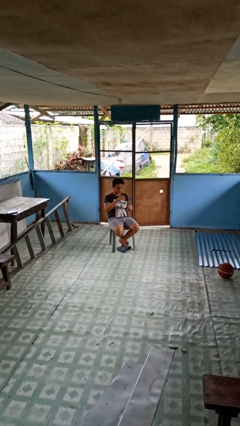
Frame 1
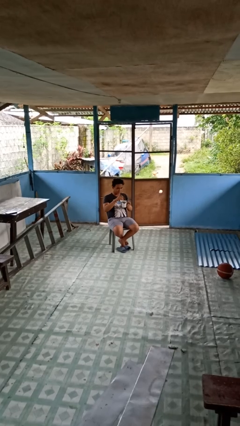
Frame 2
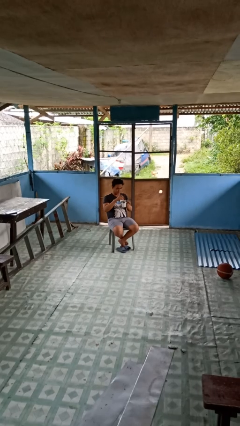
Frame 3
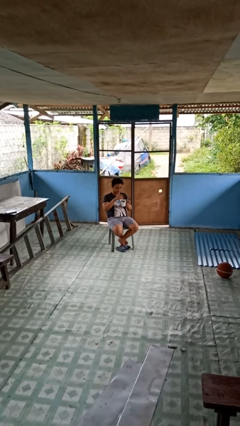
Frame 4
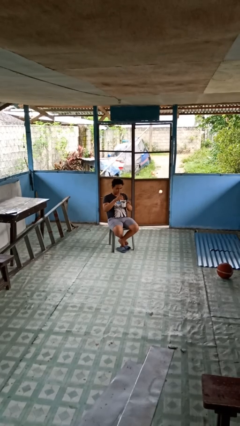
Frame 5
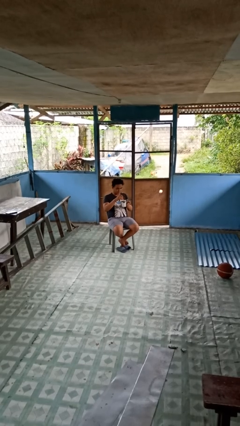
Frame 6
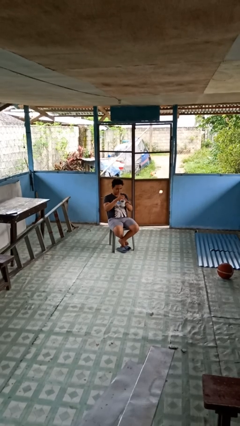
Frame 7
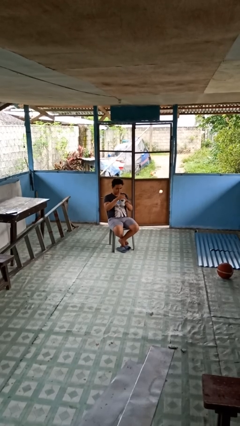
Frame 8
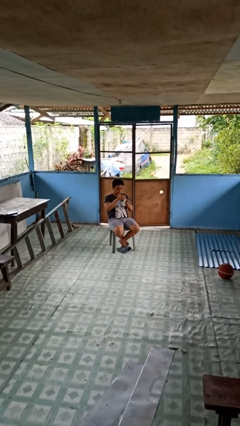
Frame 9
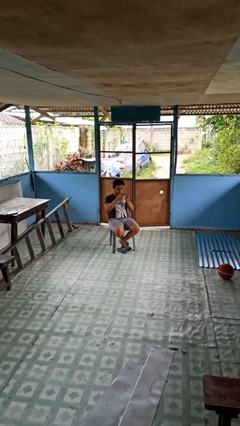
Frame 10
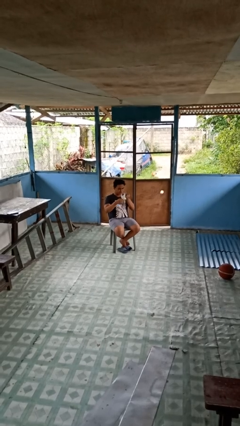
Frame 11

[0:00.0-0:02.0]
person stirs mug

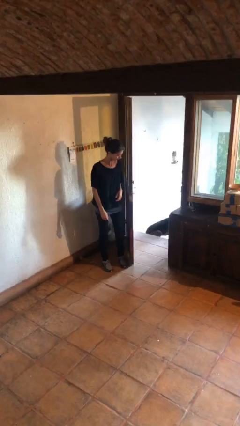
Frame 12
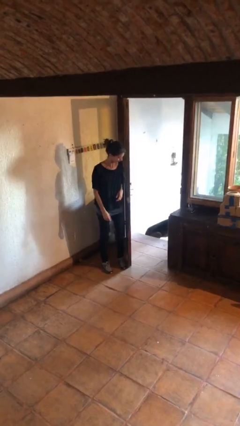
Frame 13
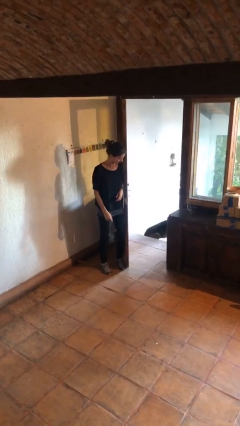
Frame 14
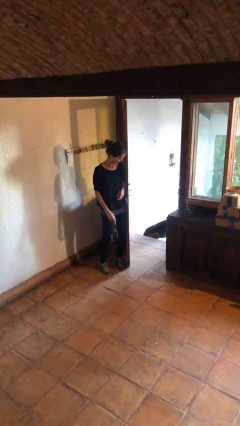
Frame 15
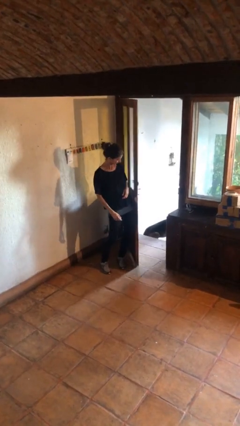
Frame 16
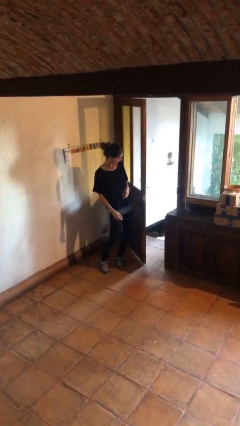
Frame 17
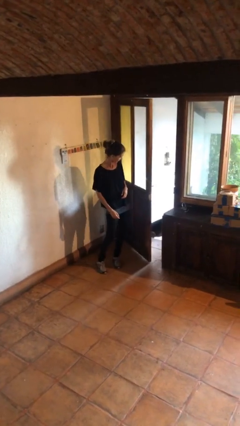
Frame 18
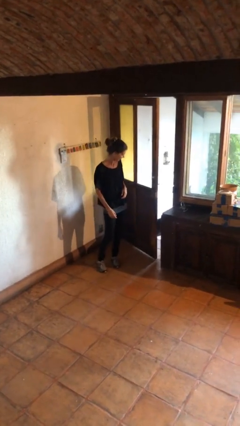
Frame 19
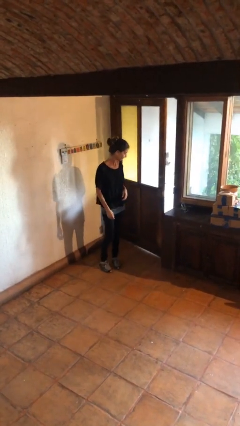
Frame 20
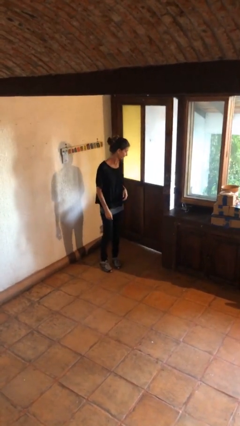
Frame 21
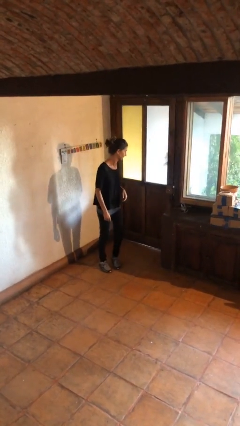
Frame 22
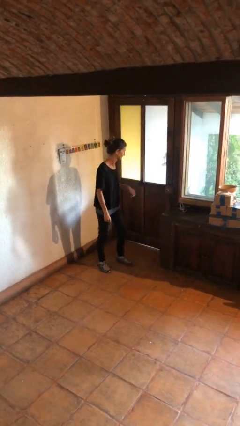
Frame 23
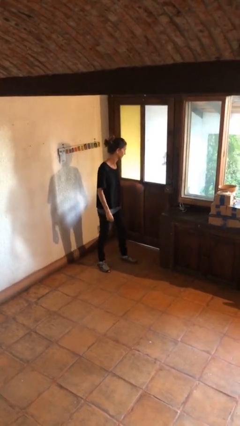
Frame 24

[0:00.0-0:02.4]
person closes door with hip

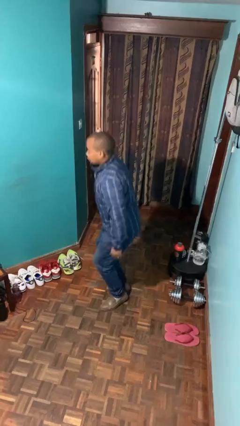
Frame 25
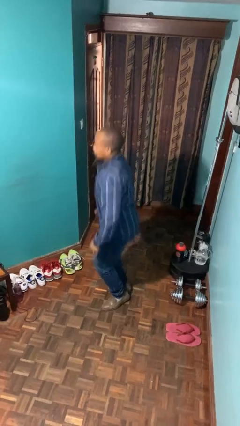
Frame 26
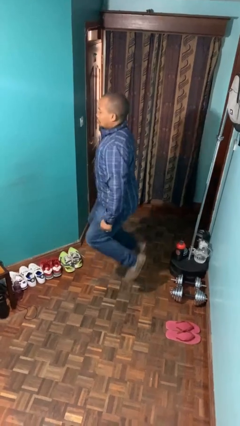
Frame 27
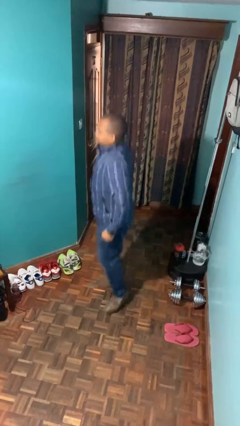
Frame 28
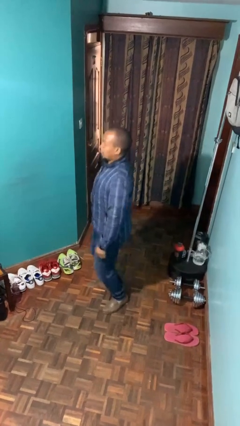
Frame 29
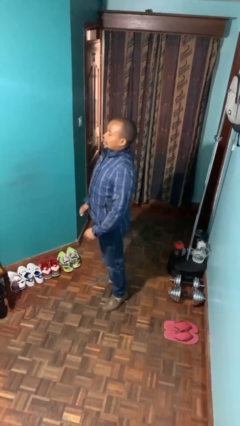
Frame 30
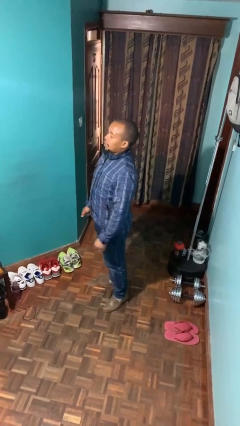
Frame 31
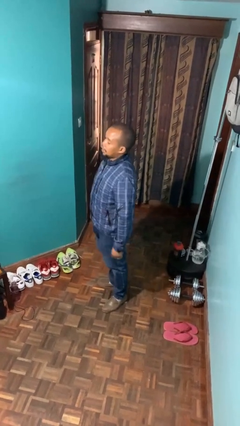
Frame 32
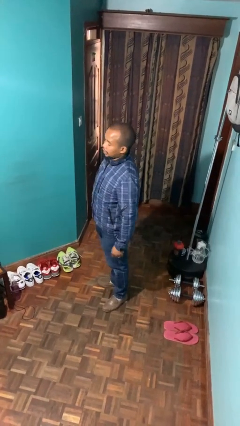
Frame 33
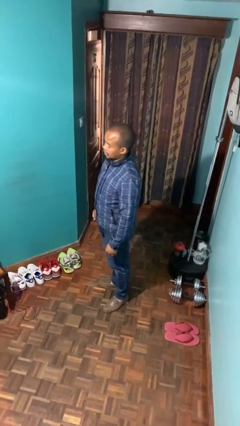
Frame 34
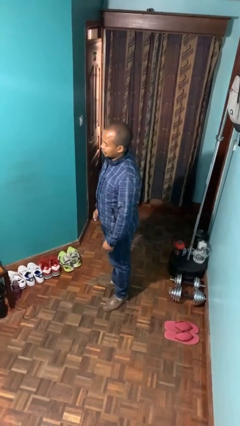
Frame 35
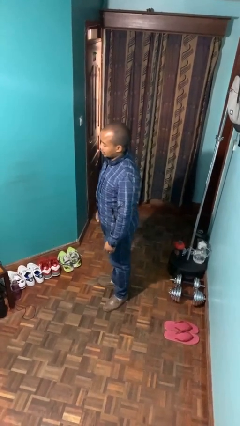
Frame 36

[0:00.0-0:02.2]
person jumps

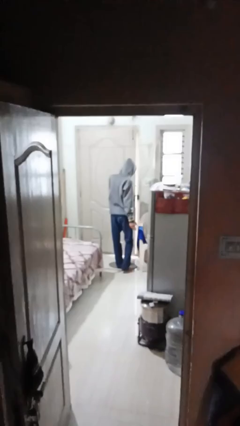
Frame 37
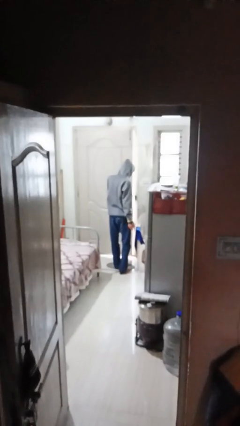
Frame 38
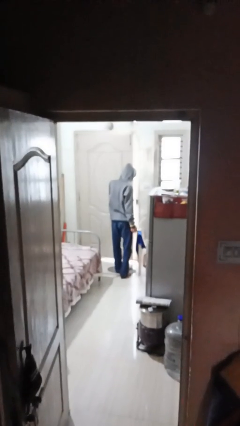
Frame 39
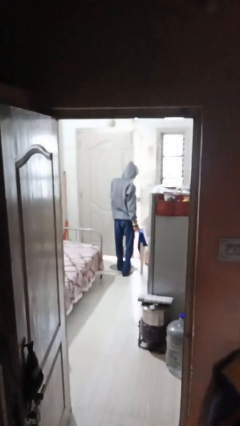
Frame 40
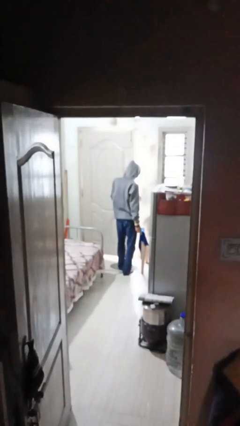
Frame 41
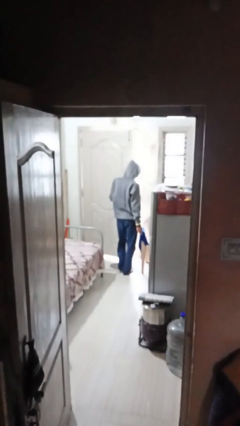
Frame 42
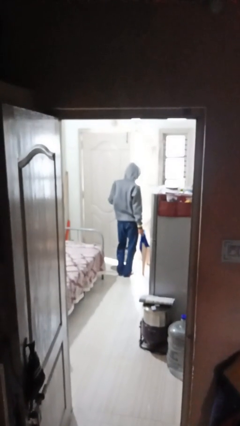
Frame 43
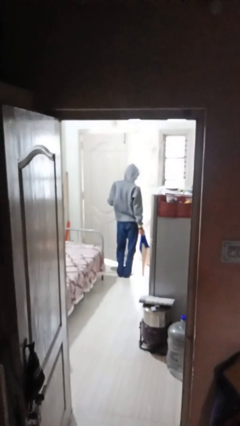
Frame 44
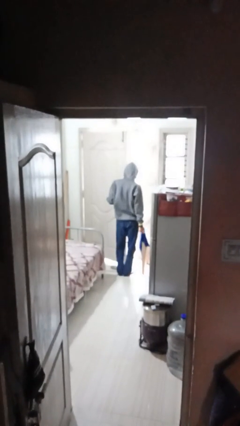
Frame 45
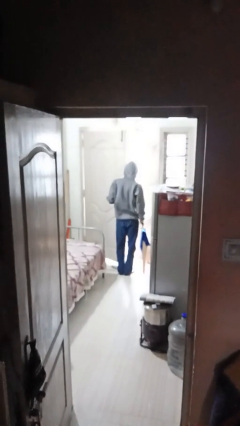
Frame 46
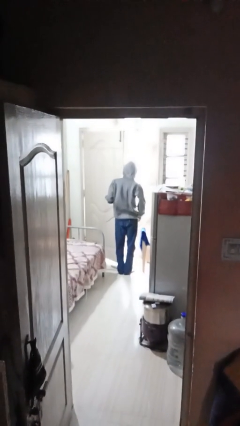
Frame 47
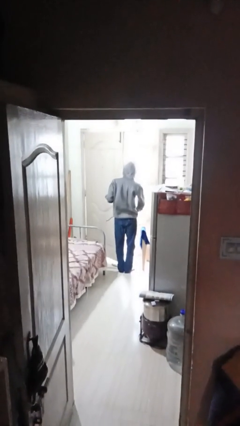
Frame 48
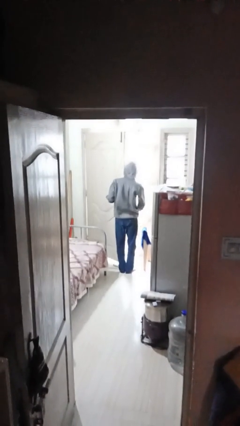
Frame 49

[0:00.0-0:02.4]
person opens facility door

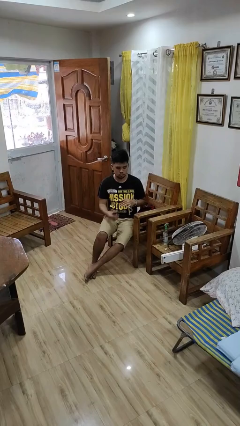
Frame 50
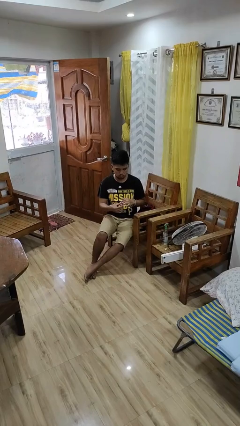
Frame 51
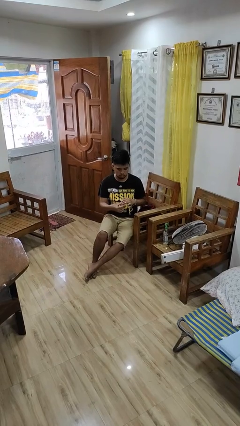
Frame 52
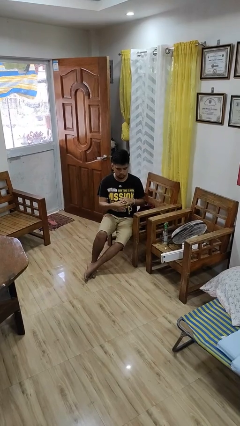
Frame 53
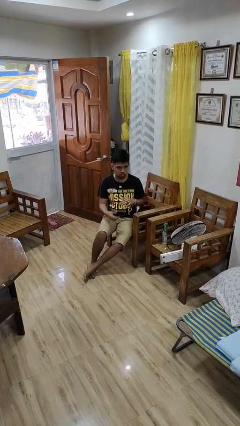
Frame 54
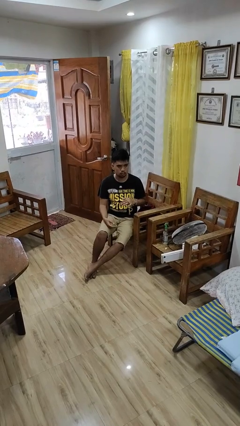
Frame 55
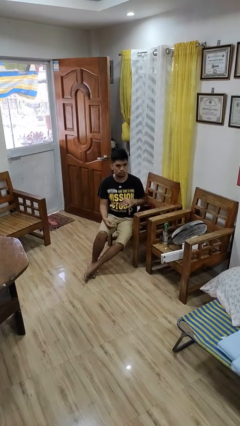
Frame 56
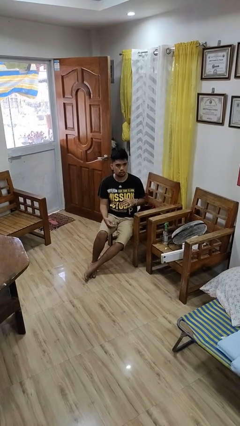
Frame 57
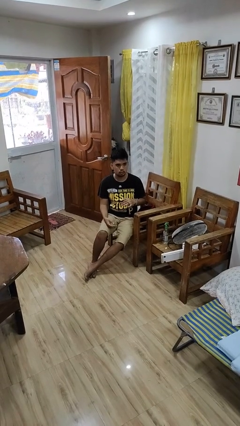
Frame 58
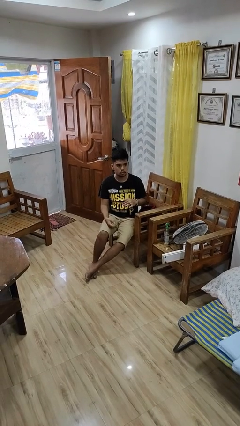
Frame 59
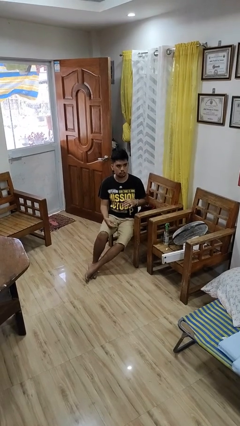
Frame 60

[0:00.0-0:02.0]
person puts on ring

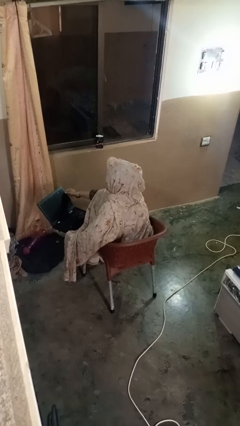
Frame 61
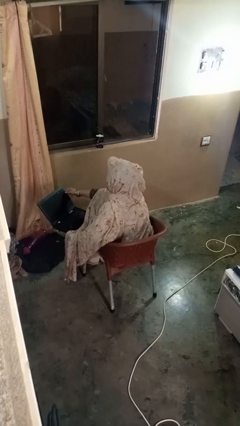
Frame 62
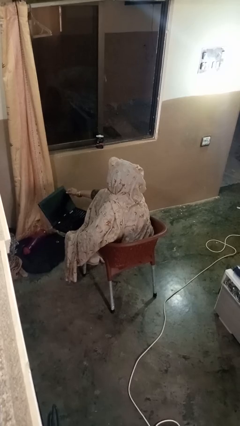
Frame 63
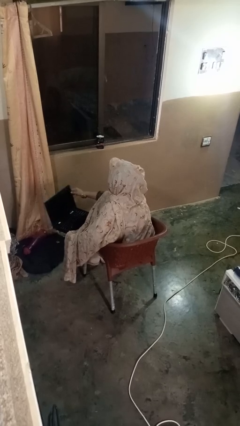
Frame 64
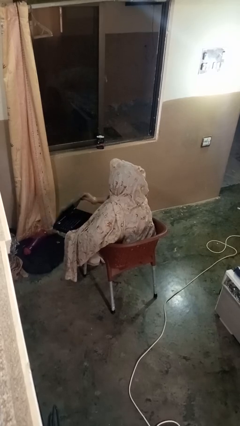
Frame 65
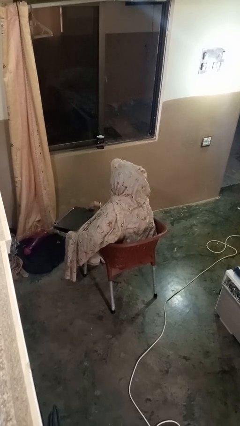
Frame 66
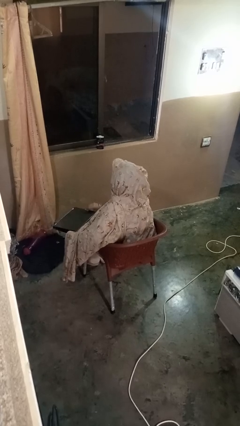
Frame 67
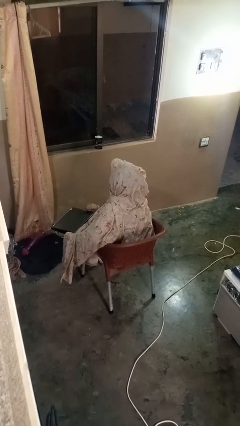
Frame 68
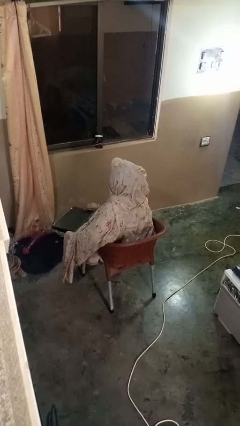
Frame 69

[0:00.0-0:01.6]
person closes laptop

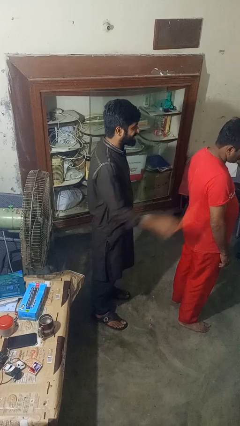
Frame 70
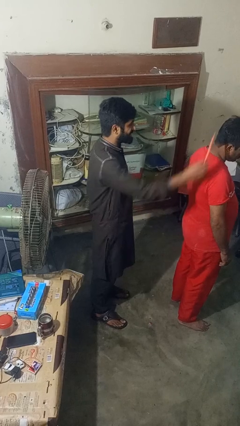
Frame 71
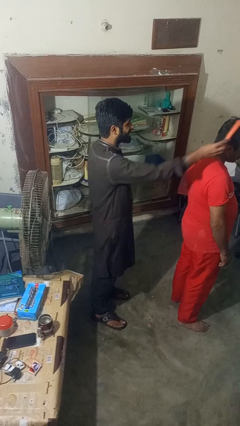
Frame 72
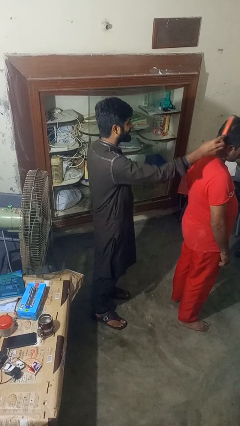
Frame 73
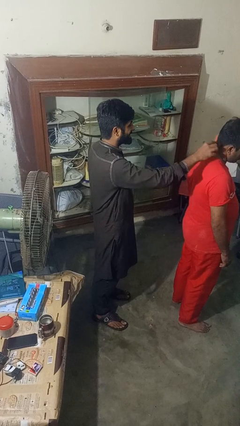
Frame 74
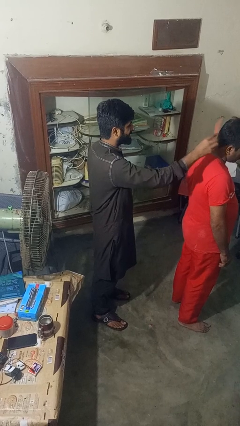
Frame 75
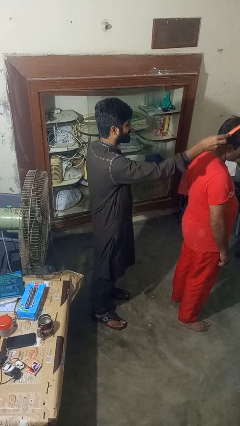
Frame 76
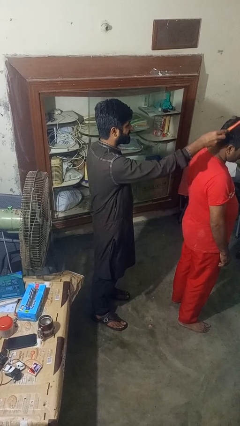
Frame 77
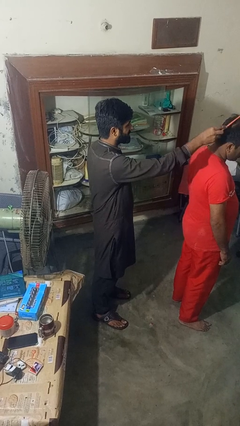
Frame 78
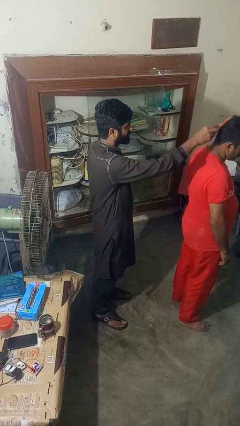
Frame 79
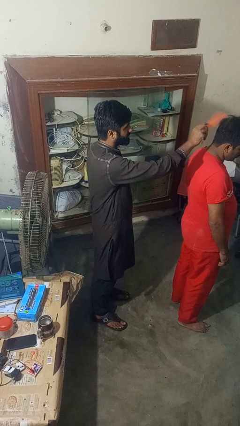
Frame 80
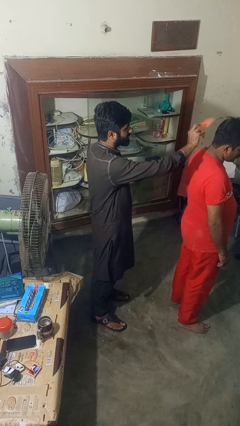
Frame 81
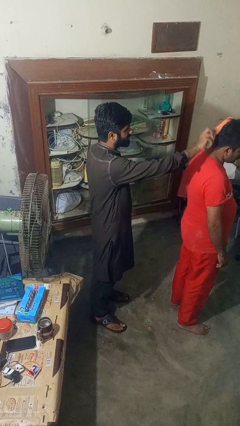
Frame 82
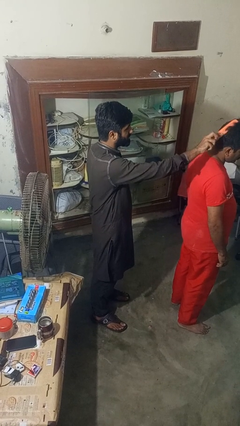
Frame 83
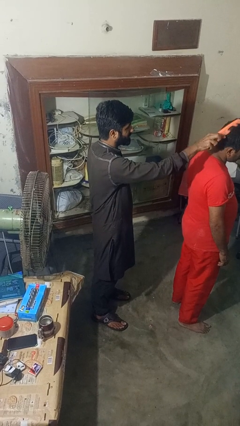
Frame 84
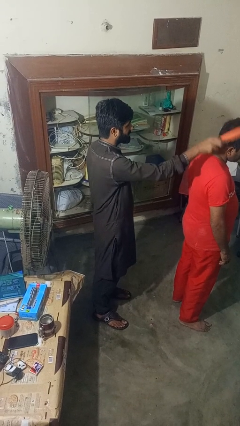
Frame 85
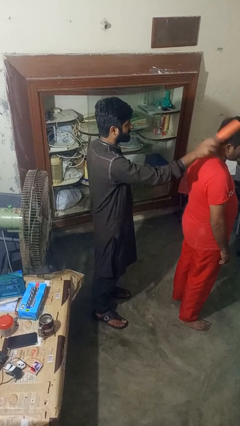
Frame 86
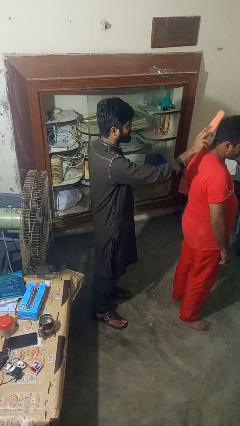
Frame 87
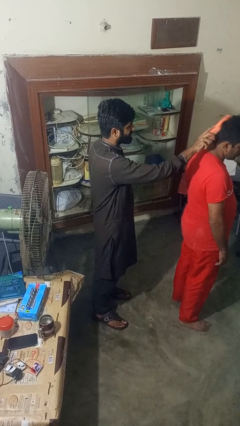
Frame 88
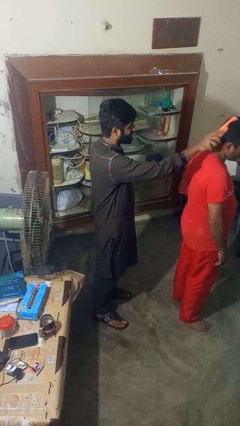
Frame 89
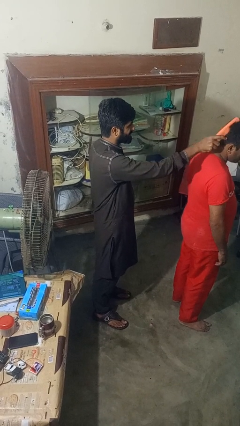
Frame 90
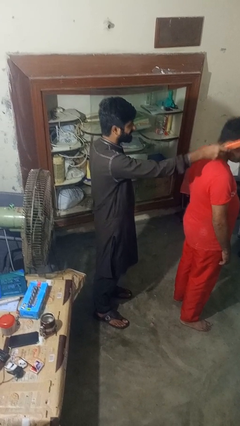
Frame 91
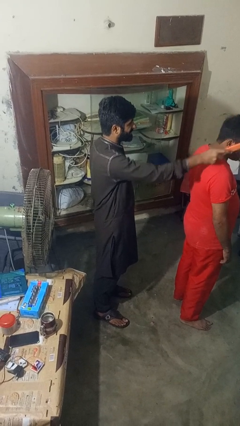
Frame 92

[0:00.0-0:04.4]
person brushes hair of person
